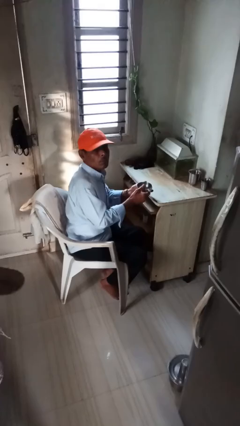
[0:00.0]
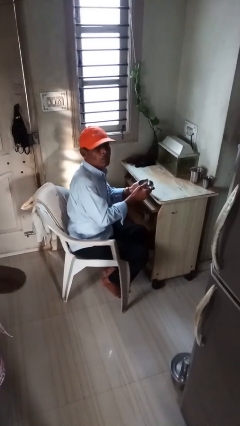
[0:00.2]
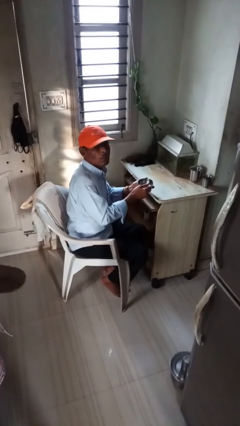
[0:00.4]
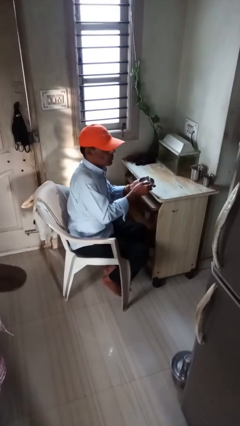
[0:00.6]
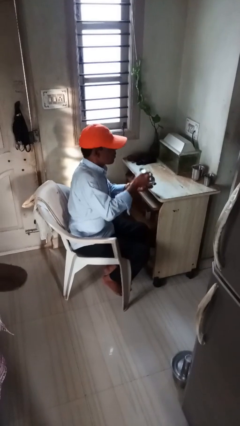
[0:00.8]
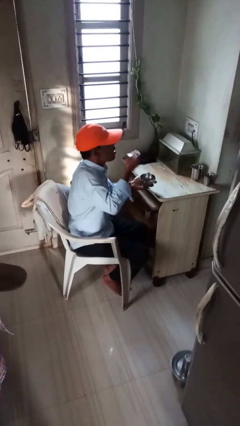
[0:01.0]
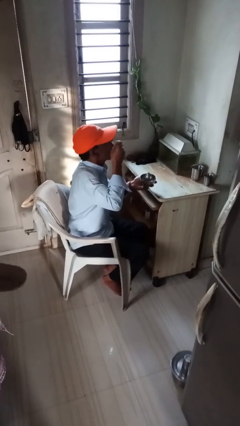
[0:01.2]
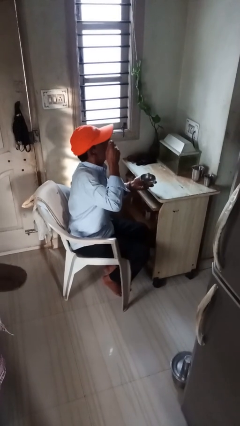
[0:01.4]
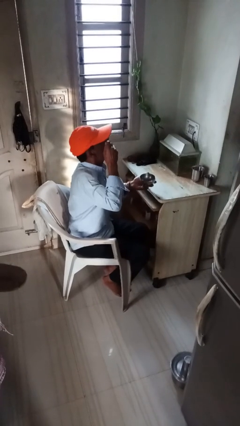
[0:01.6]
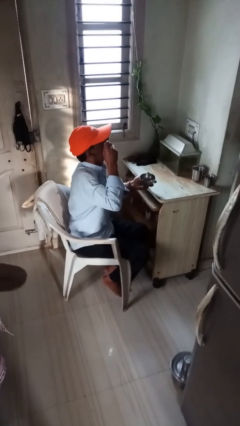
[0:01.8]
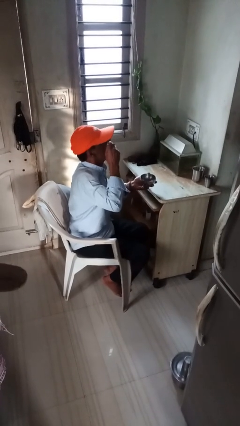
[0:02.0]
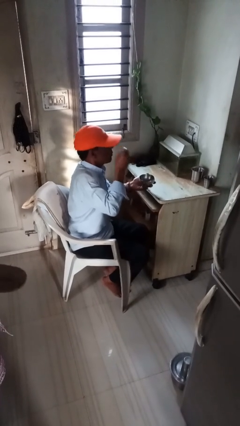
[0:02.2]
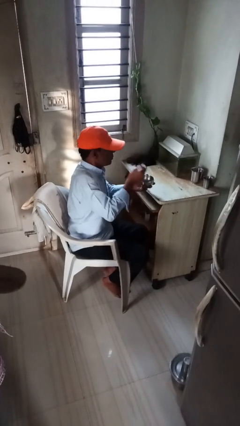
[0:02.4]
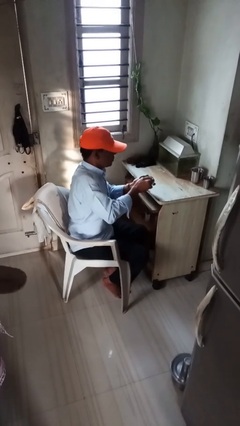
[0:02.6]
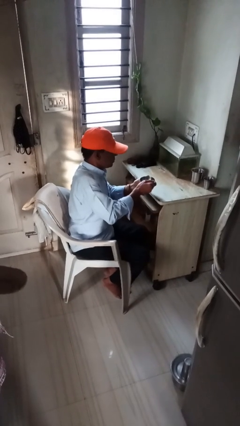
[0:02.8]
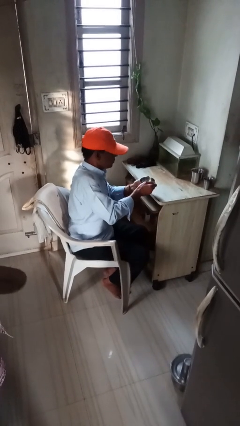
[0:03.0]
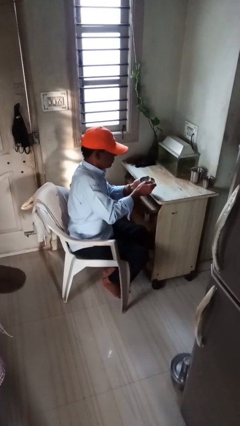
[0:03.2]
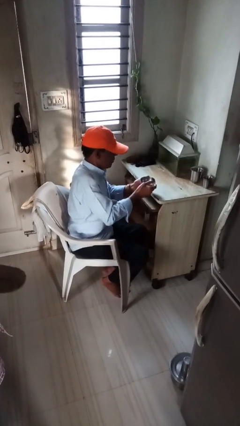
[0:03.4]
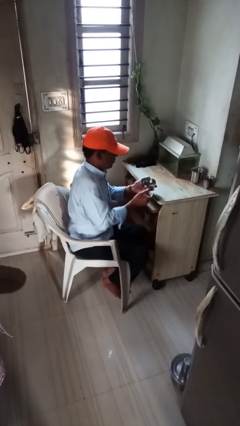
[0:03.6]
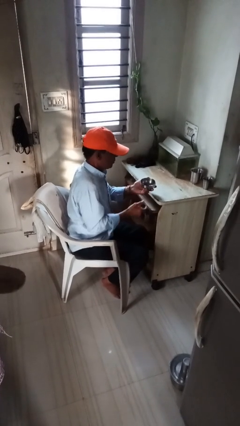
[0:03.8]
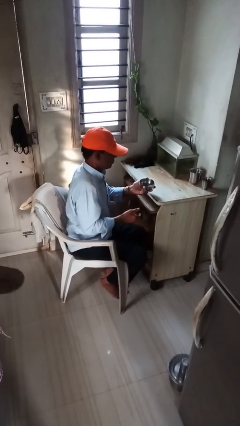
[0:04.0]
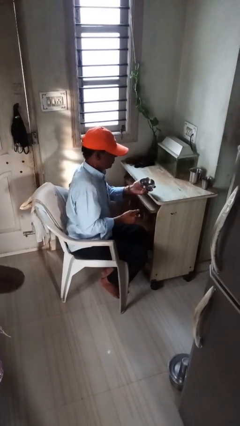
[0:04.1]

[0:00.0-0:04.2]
person eats with utensil

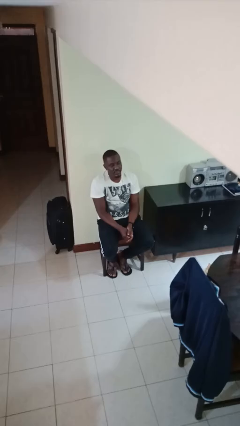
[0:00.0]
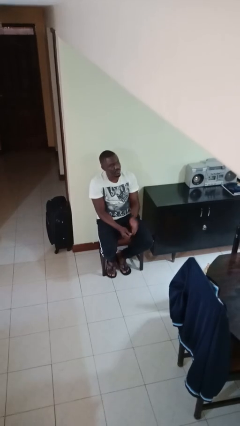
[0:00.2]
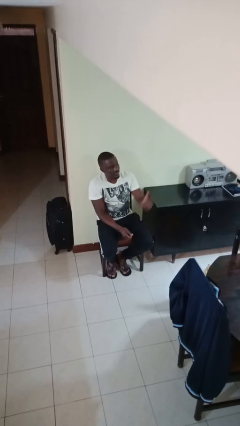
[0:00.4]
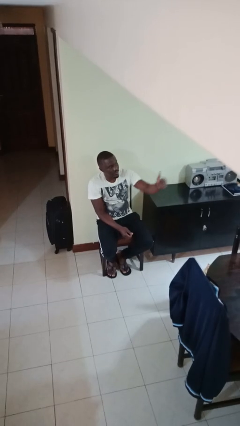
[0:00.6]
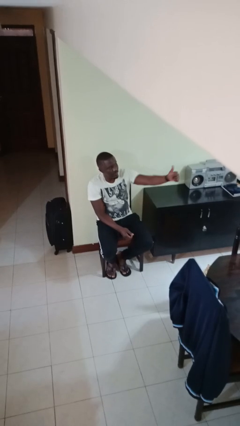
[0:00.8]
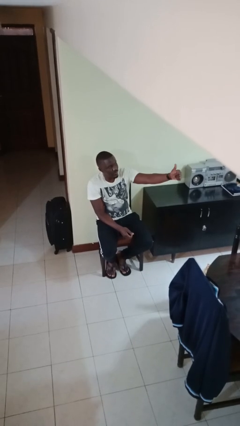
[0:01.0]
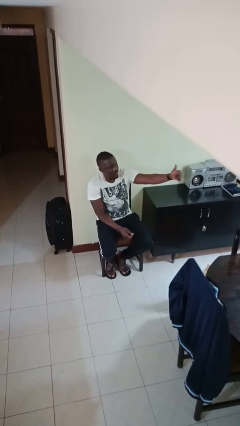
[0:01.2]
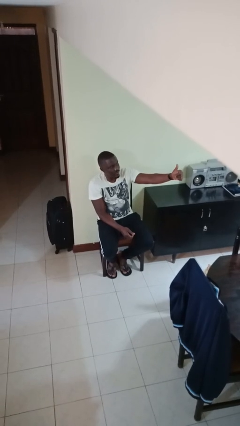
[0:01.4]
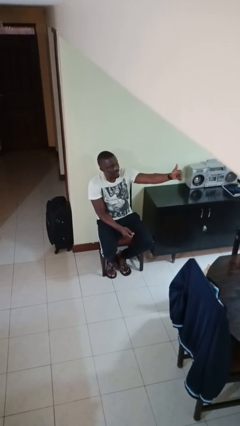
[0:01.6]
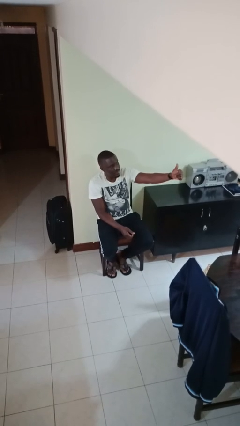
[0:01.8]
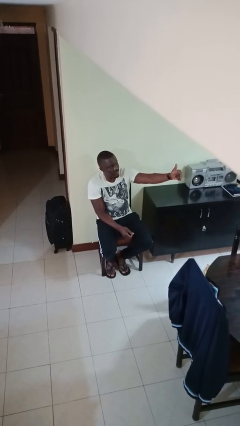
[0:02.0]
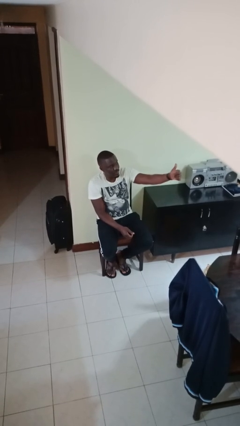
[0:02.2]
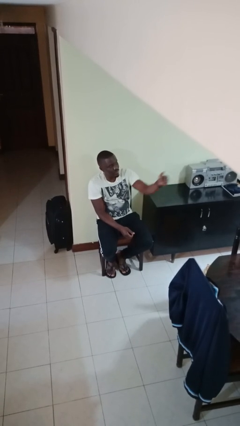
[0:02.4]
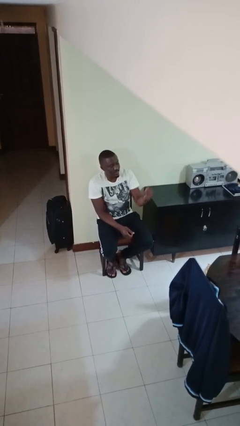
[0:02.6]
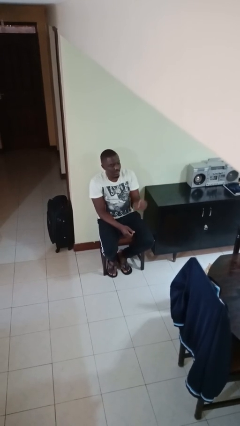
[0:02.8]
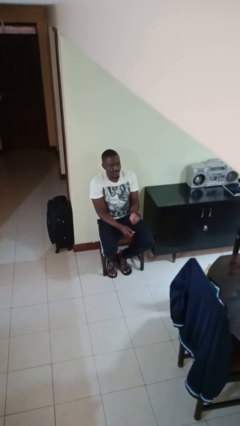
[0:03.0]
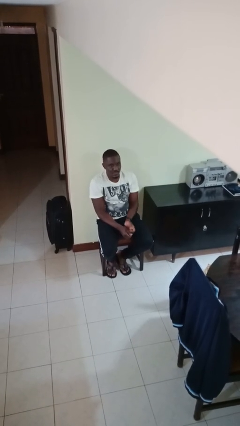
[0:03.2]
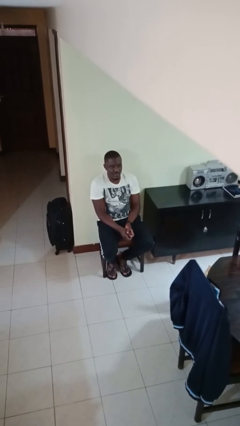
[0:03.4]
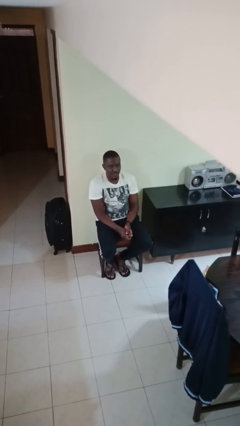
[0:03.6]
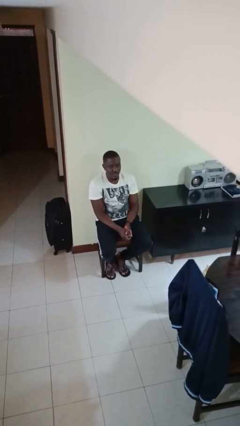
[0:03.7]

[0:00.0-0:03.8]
person gestures thumbs up

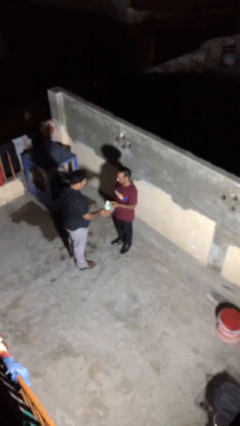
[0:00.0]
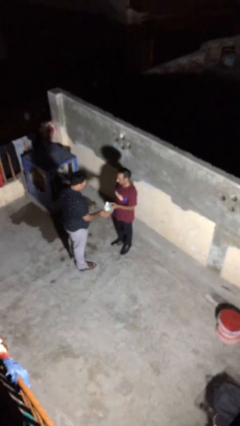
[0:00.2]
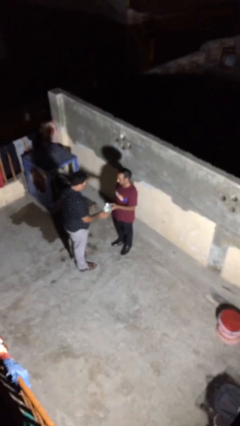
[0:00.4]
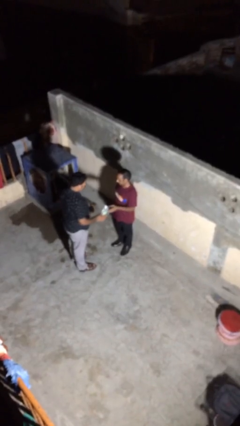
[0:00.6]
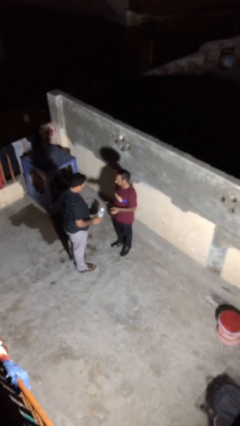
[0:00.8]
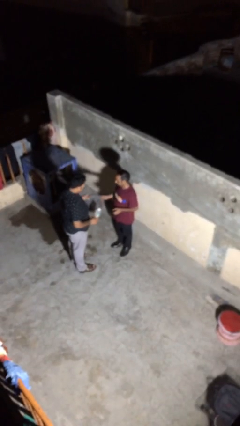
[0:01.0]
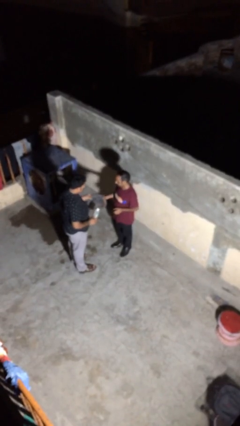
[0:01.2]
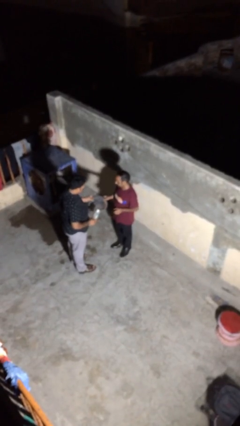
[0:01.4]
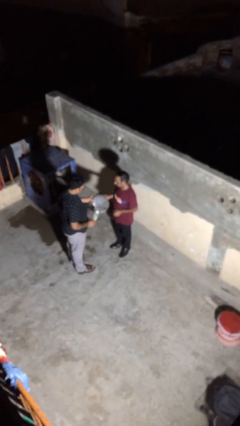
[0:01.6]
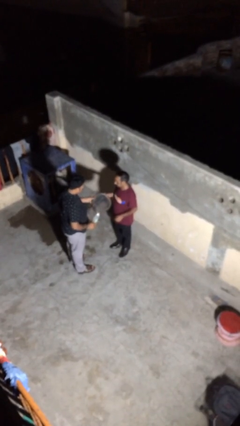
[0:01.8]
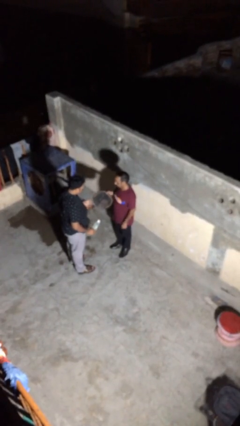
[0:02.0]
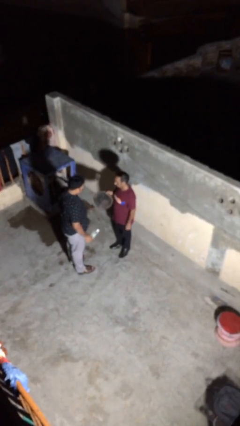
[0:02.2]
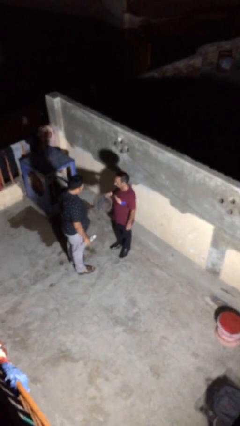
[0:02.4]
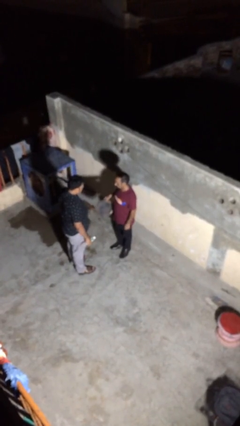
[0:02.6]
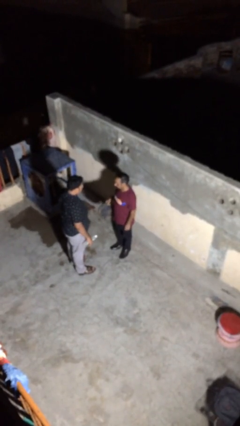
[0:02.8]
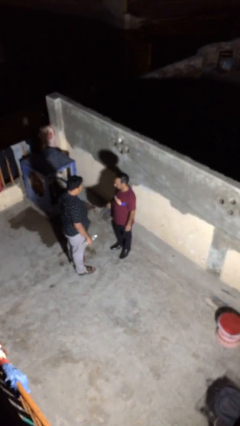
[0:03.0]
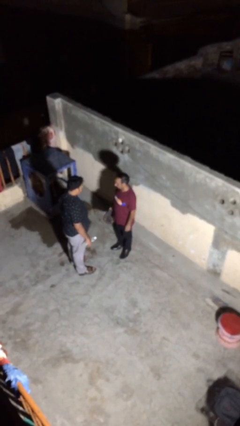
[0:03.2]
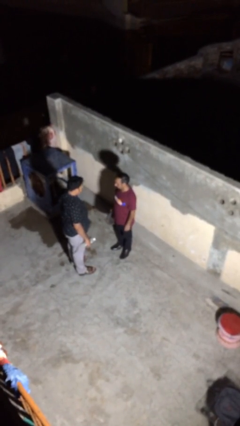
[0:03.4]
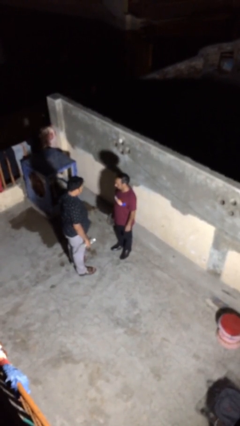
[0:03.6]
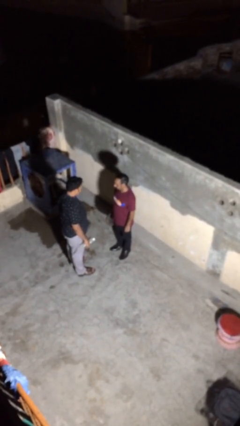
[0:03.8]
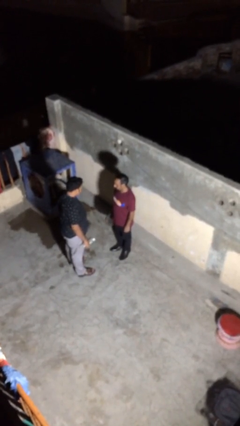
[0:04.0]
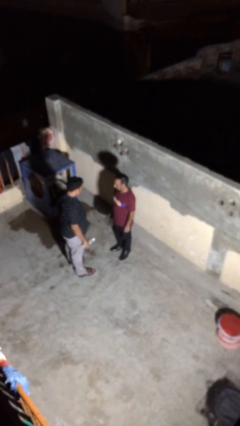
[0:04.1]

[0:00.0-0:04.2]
person transfers object to person

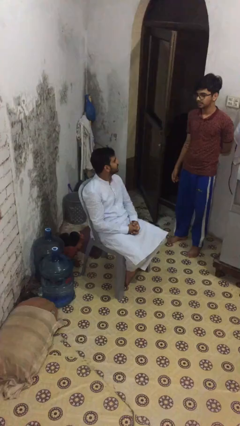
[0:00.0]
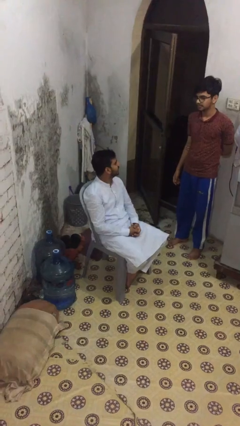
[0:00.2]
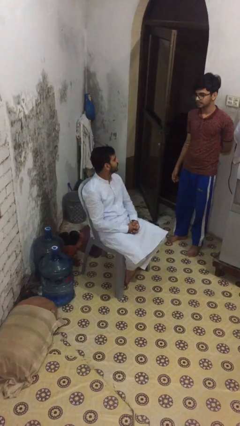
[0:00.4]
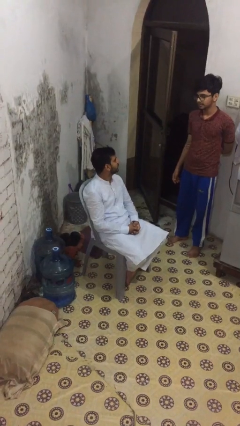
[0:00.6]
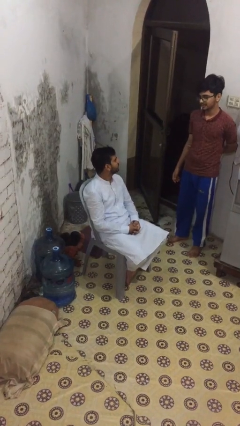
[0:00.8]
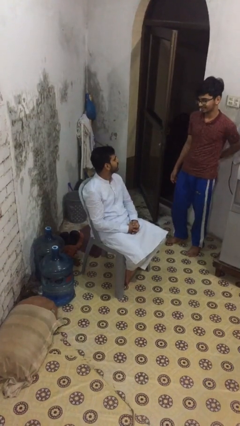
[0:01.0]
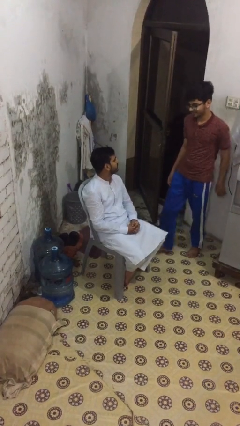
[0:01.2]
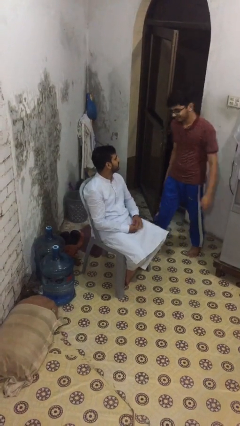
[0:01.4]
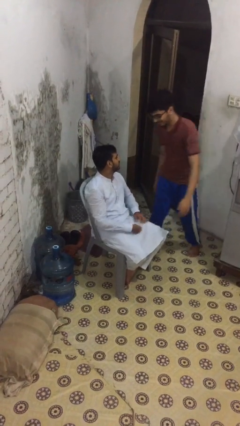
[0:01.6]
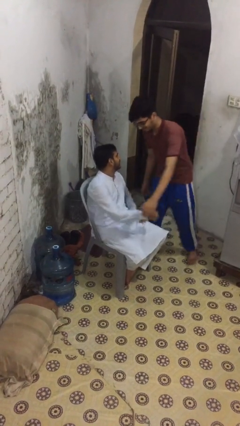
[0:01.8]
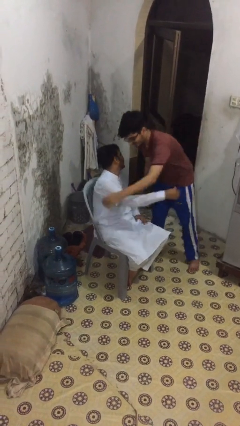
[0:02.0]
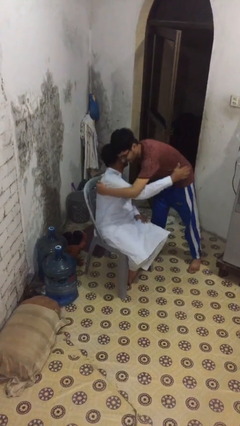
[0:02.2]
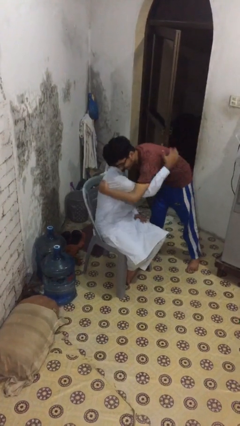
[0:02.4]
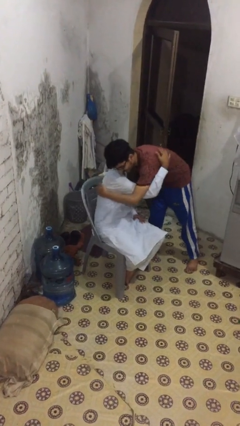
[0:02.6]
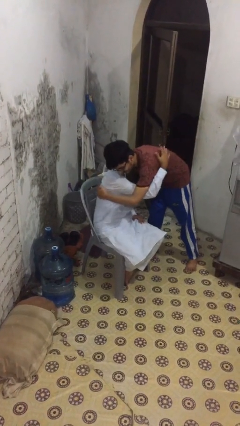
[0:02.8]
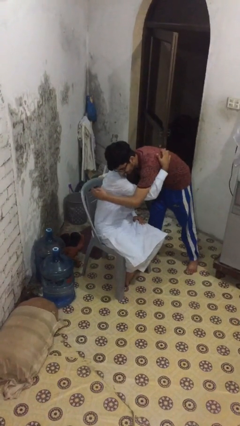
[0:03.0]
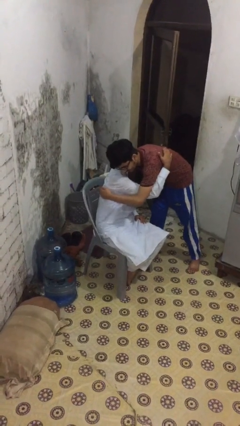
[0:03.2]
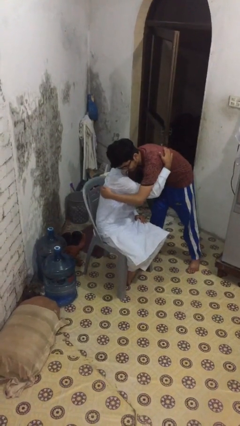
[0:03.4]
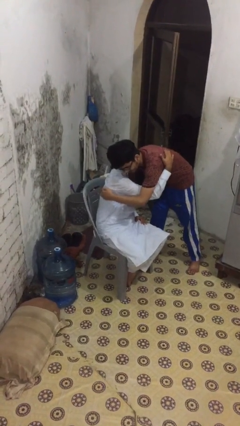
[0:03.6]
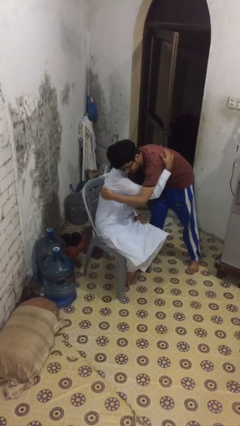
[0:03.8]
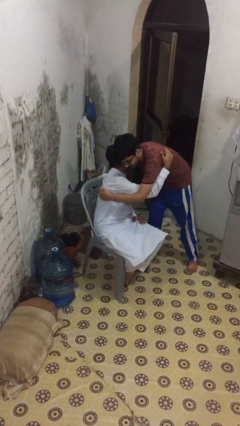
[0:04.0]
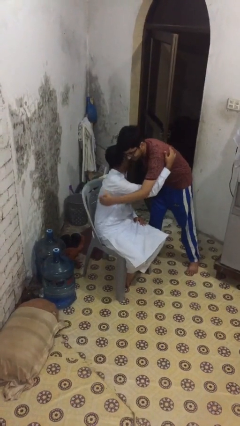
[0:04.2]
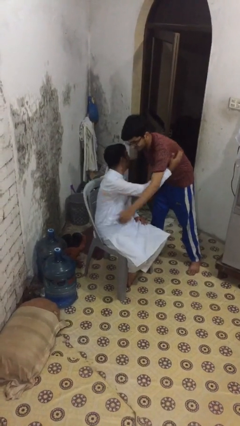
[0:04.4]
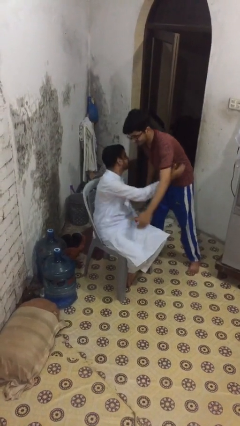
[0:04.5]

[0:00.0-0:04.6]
person embraces person

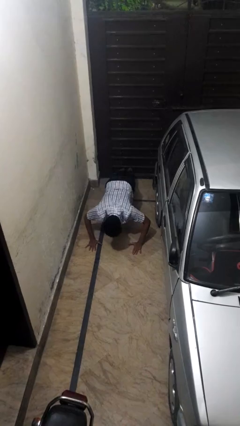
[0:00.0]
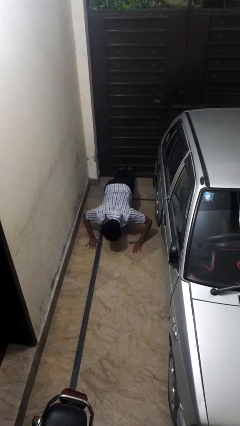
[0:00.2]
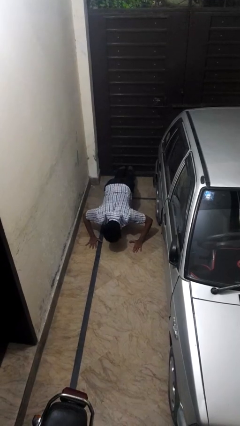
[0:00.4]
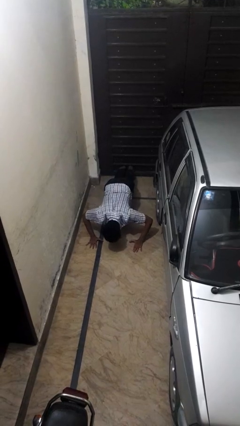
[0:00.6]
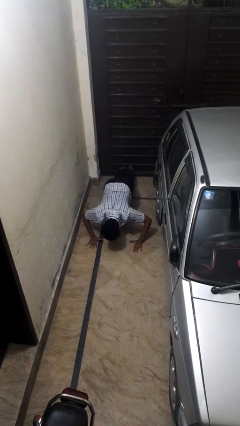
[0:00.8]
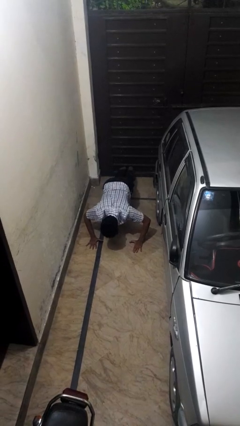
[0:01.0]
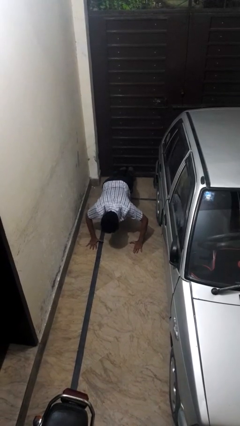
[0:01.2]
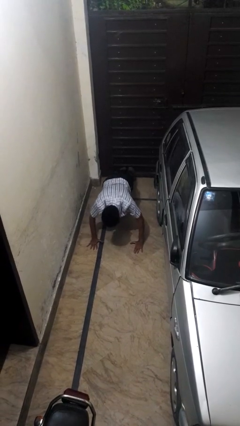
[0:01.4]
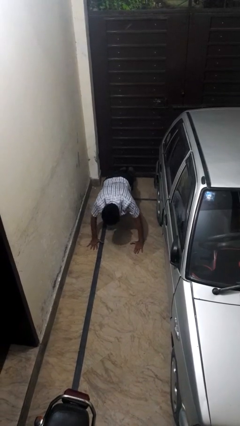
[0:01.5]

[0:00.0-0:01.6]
person exercises with pushup
